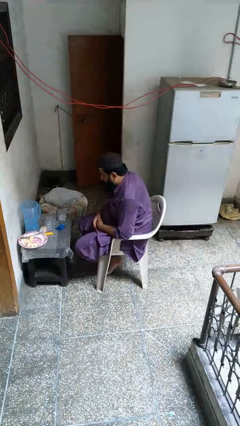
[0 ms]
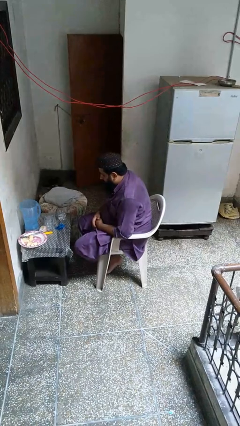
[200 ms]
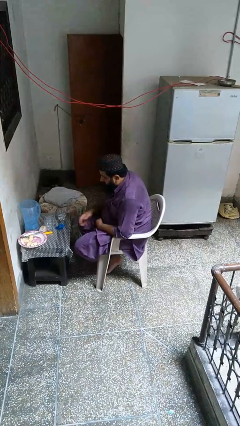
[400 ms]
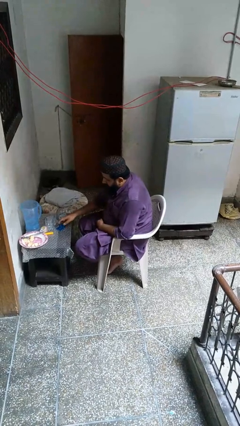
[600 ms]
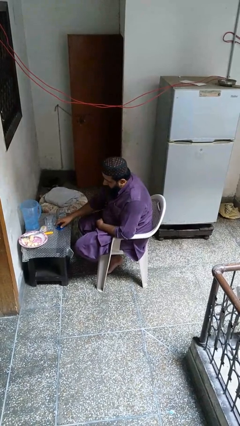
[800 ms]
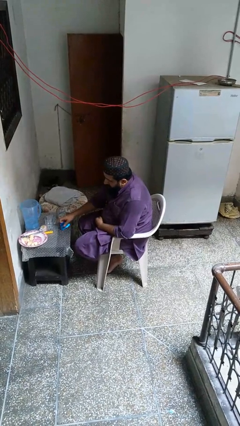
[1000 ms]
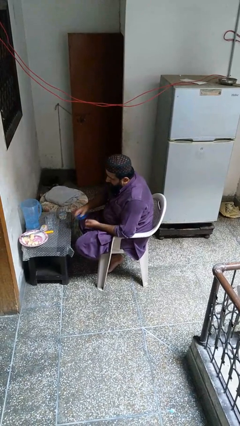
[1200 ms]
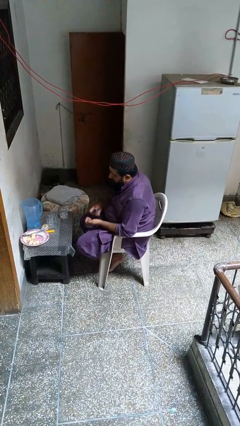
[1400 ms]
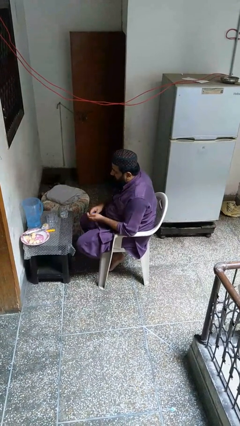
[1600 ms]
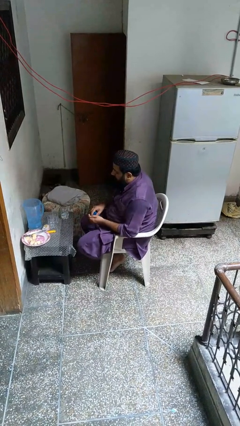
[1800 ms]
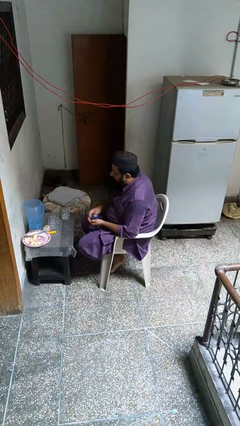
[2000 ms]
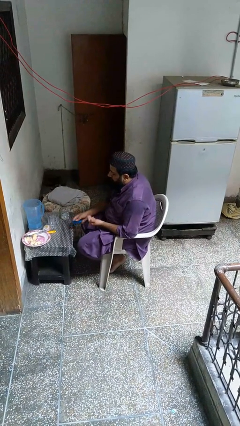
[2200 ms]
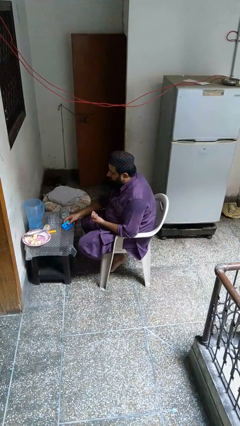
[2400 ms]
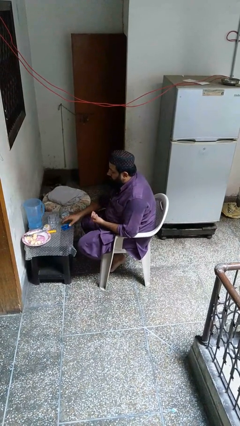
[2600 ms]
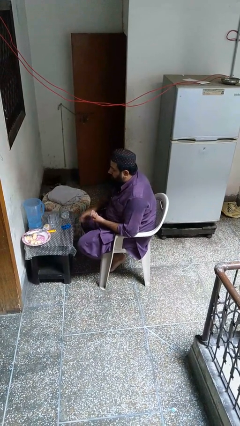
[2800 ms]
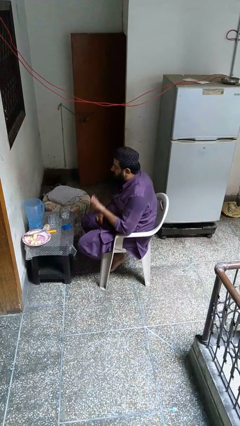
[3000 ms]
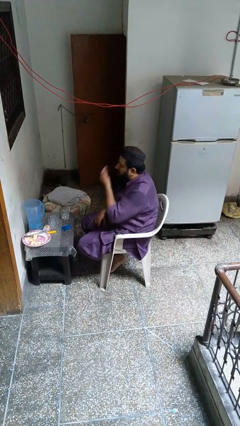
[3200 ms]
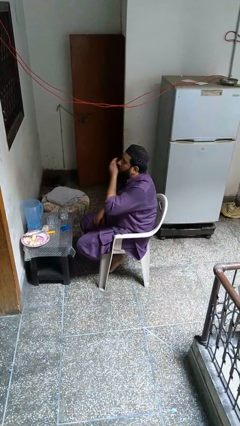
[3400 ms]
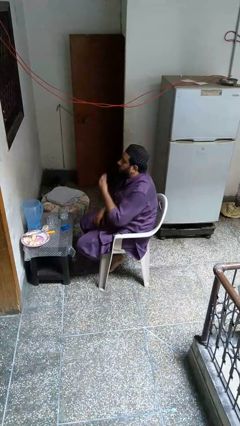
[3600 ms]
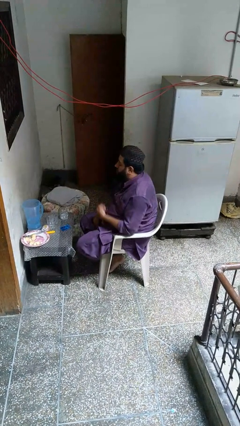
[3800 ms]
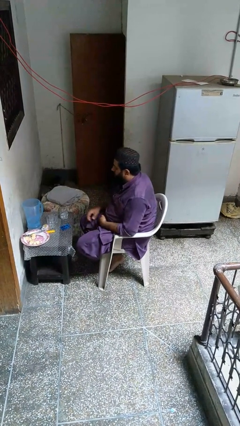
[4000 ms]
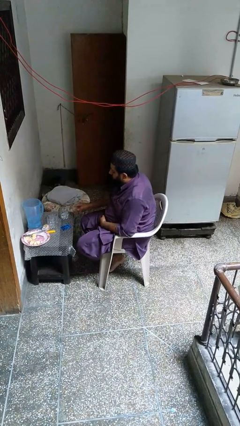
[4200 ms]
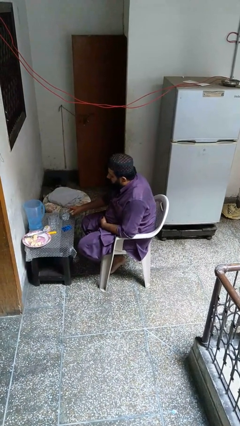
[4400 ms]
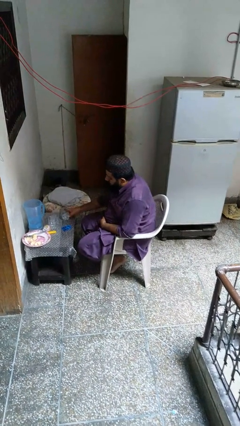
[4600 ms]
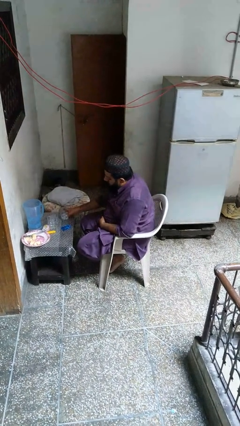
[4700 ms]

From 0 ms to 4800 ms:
person takes medicine pills

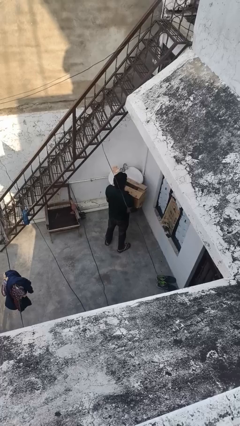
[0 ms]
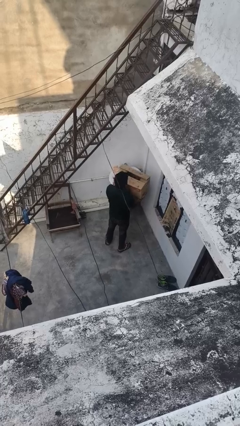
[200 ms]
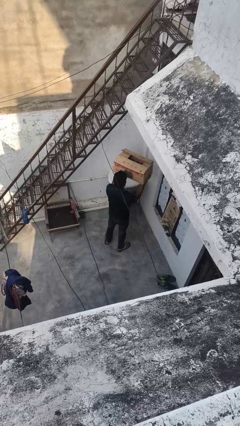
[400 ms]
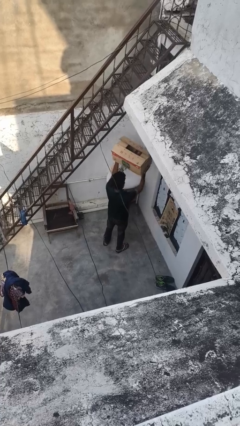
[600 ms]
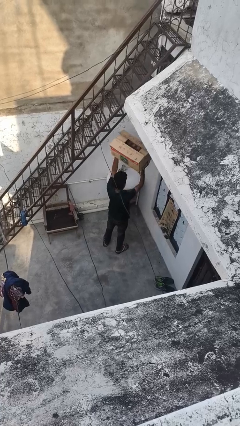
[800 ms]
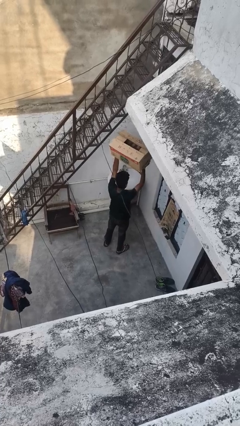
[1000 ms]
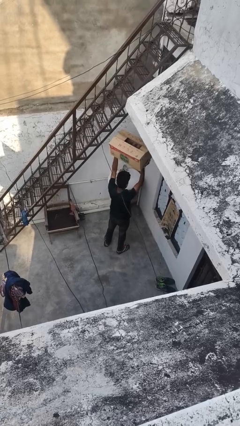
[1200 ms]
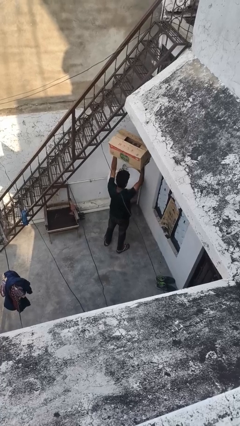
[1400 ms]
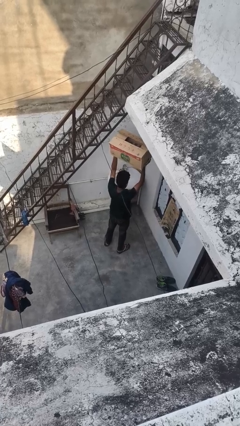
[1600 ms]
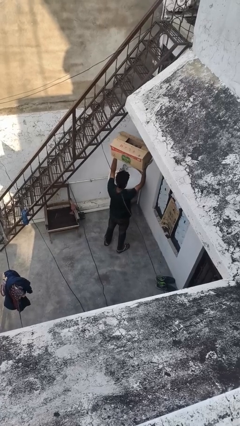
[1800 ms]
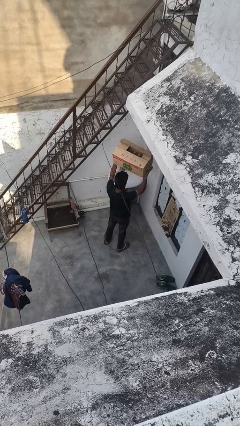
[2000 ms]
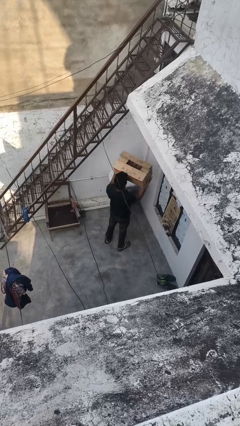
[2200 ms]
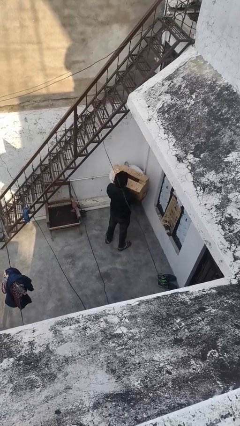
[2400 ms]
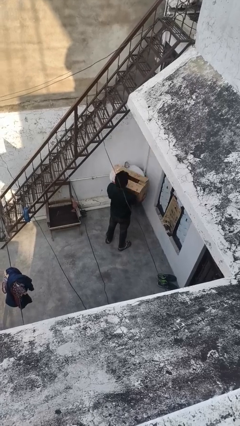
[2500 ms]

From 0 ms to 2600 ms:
person holds object above head

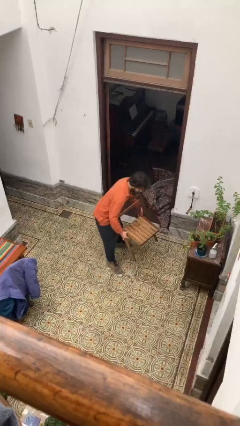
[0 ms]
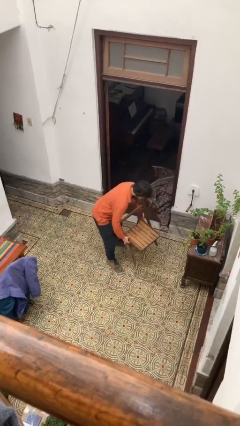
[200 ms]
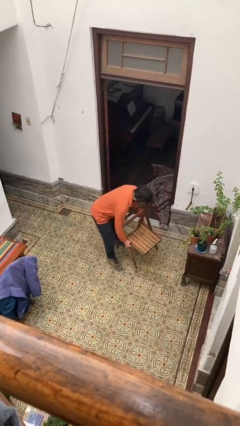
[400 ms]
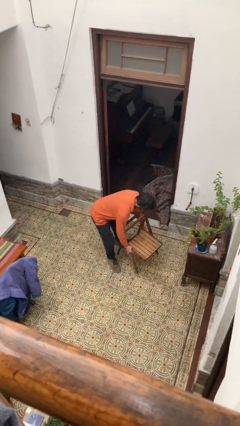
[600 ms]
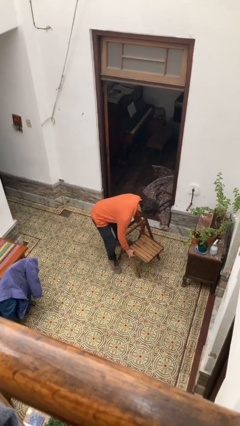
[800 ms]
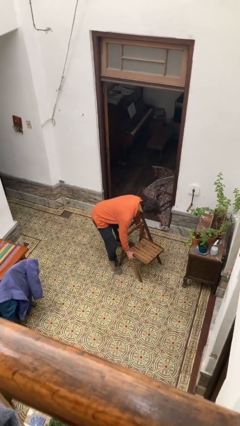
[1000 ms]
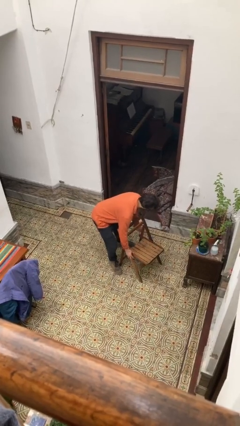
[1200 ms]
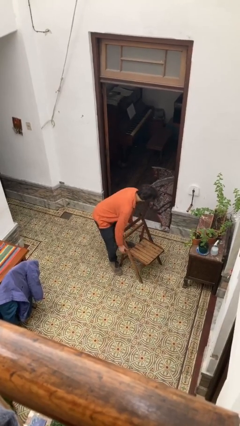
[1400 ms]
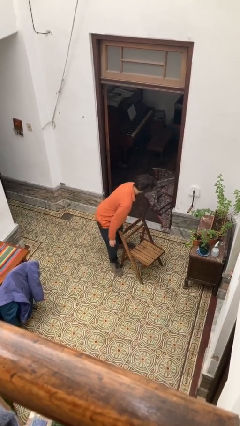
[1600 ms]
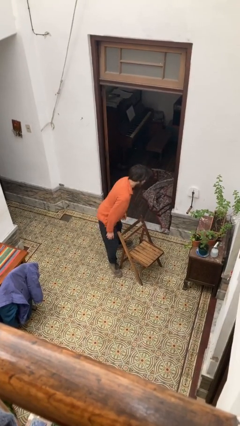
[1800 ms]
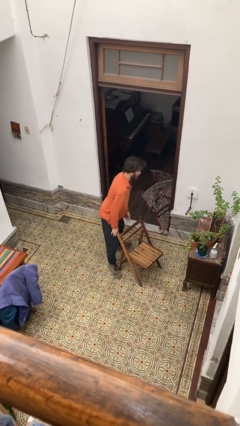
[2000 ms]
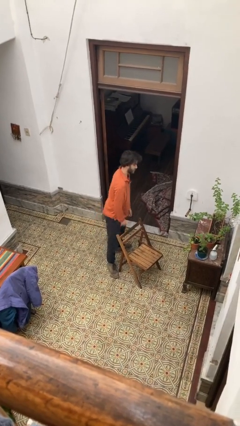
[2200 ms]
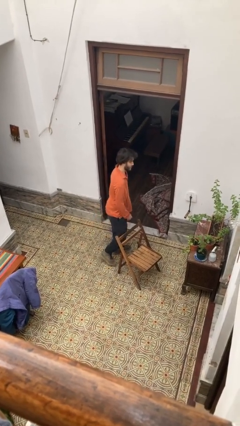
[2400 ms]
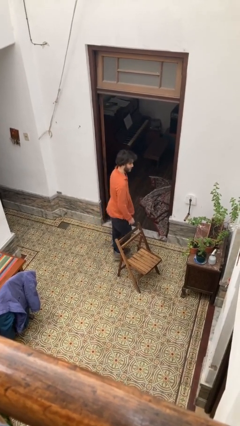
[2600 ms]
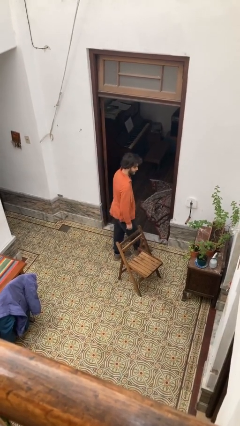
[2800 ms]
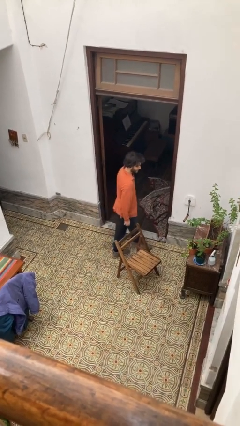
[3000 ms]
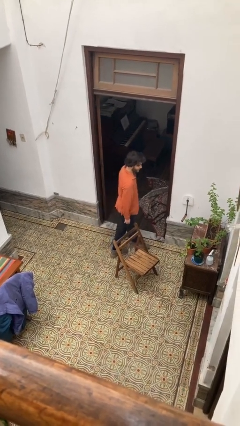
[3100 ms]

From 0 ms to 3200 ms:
person puts down object on floor

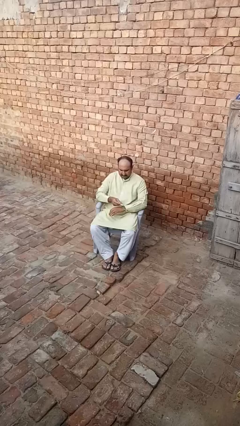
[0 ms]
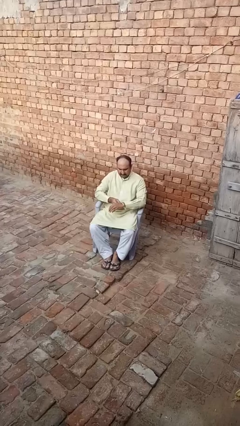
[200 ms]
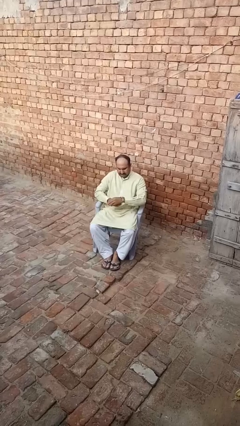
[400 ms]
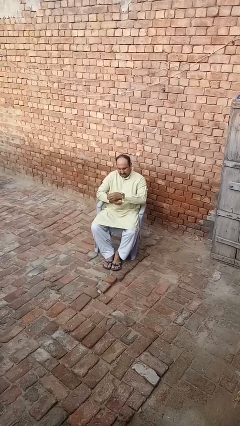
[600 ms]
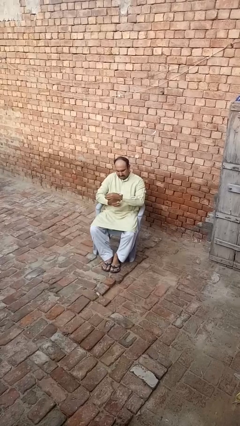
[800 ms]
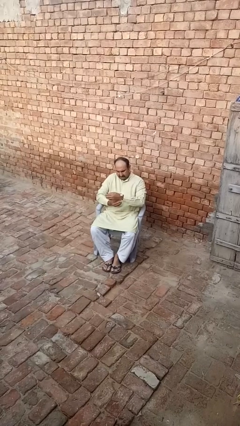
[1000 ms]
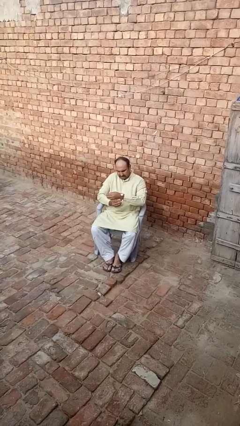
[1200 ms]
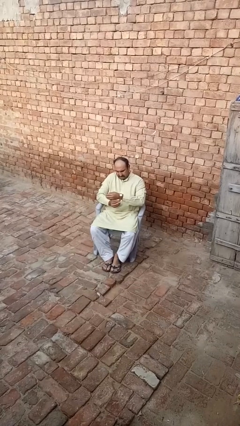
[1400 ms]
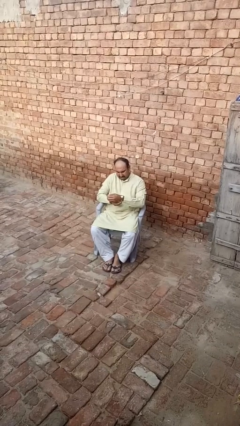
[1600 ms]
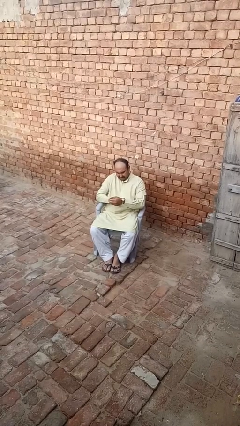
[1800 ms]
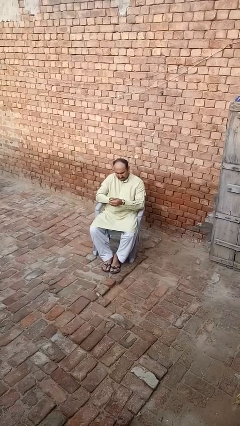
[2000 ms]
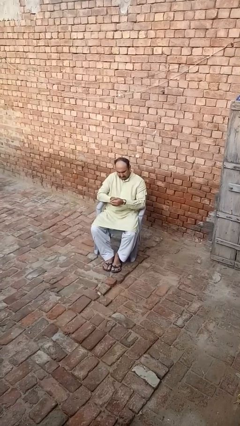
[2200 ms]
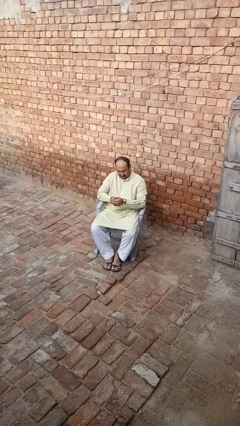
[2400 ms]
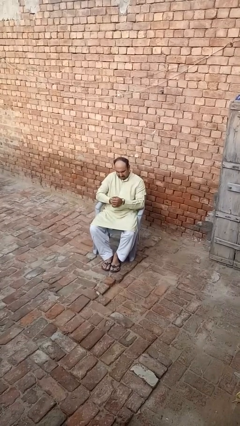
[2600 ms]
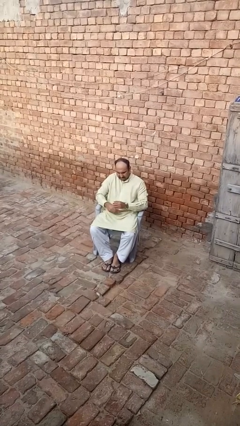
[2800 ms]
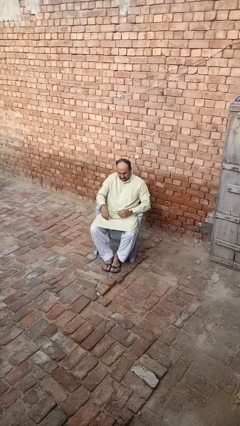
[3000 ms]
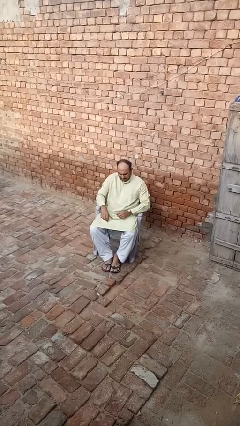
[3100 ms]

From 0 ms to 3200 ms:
person puts on wristwatch

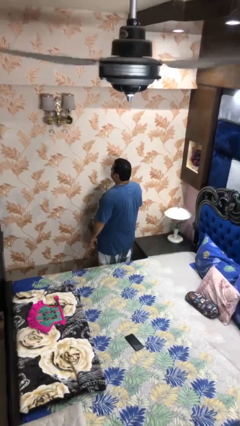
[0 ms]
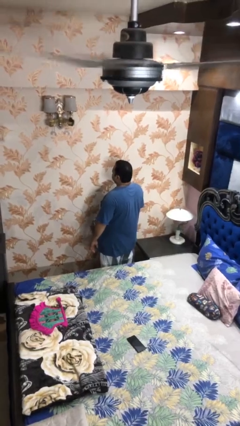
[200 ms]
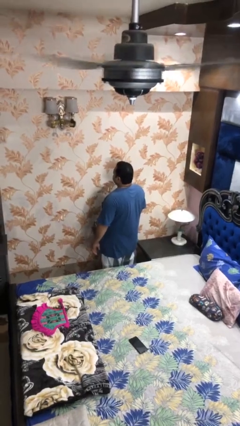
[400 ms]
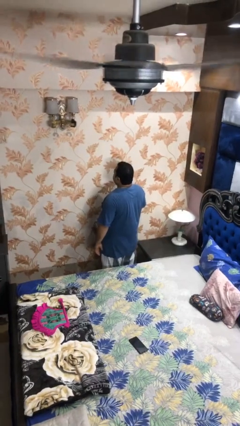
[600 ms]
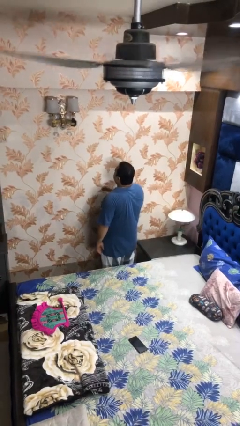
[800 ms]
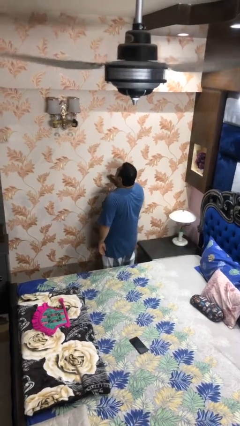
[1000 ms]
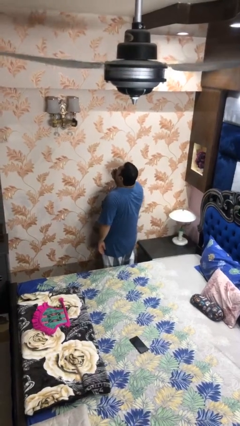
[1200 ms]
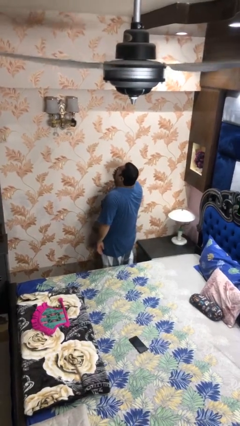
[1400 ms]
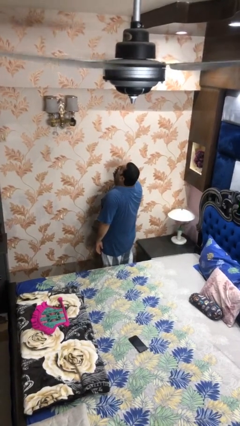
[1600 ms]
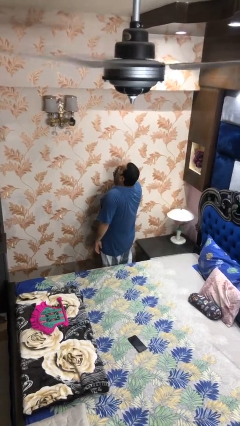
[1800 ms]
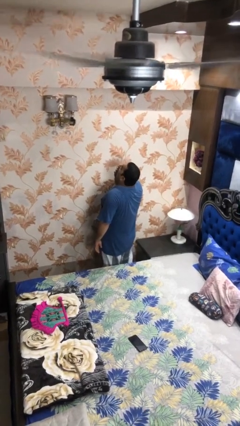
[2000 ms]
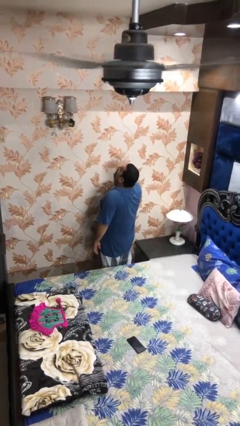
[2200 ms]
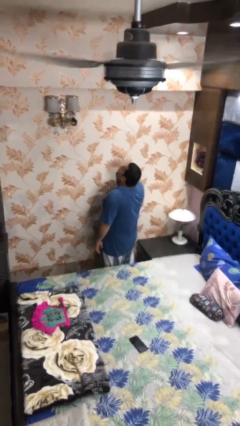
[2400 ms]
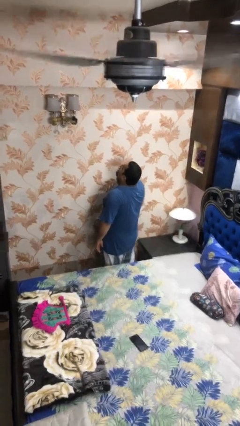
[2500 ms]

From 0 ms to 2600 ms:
person yawns

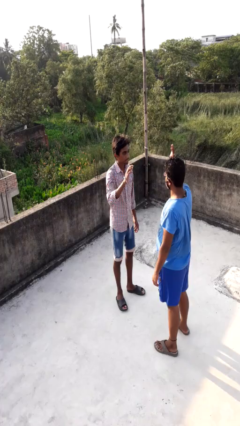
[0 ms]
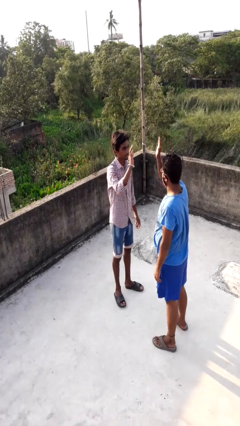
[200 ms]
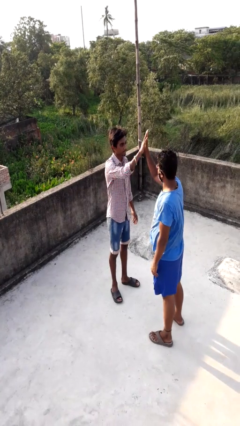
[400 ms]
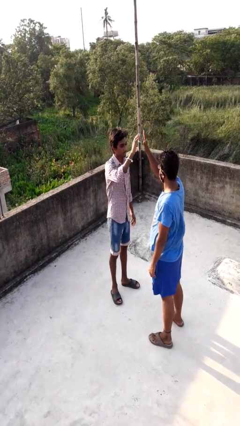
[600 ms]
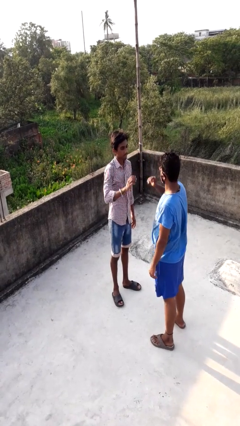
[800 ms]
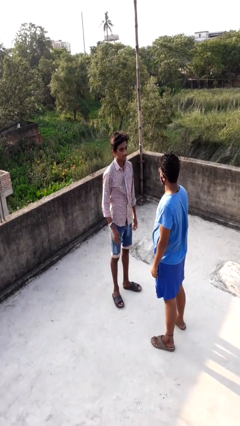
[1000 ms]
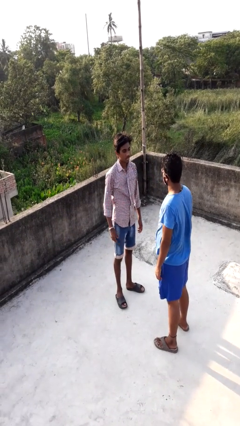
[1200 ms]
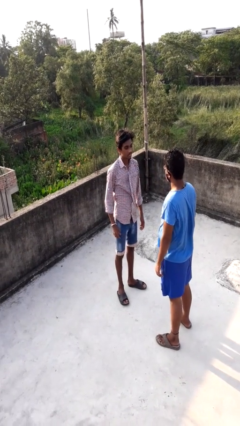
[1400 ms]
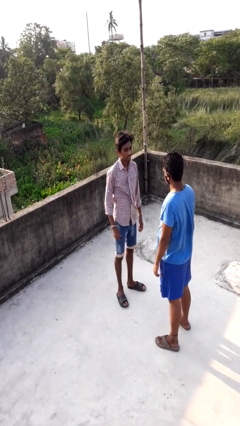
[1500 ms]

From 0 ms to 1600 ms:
person highfives hand
